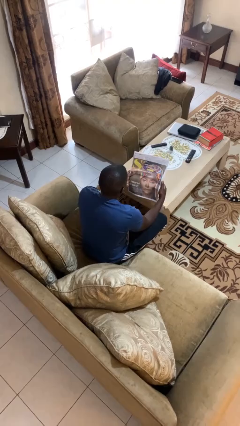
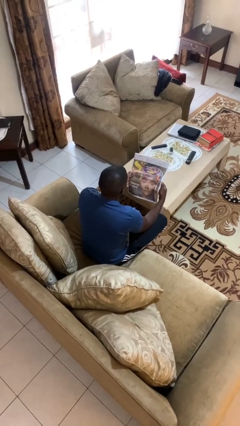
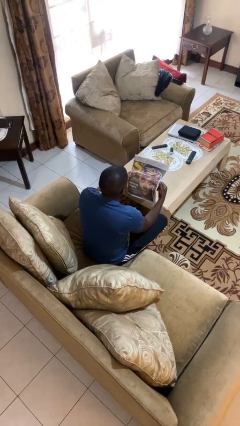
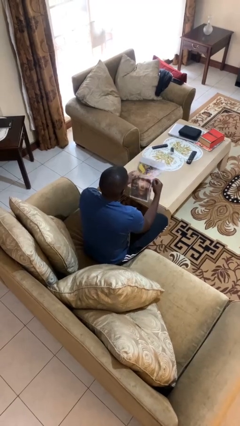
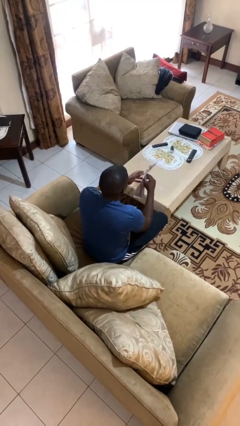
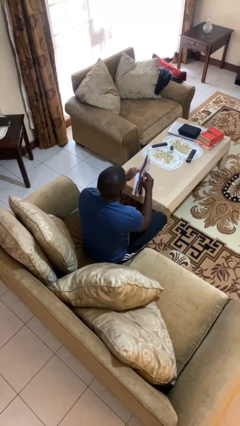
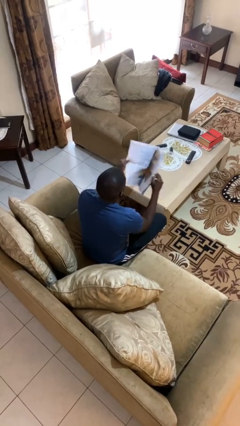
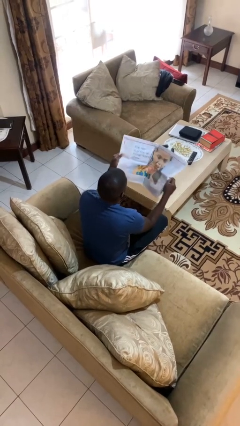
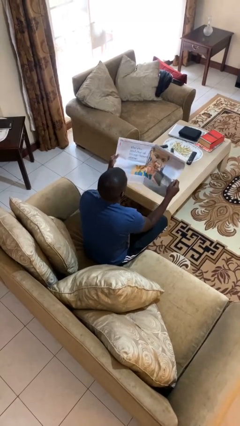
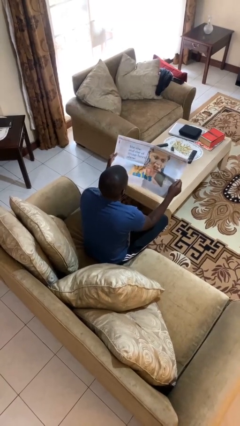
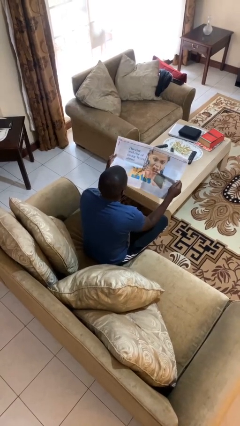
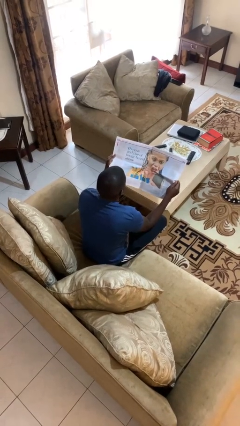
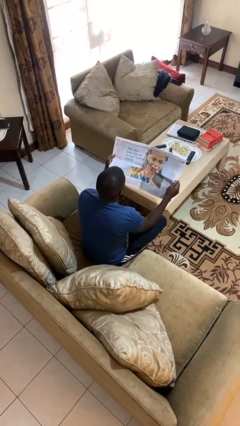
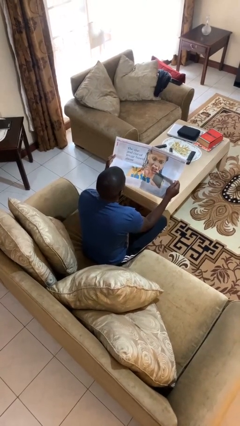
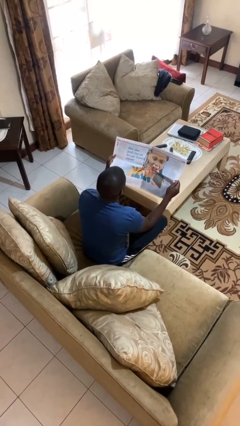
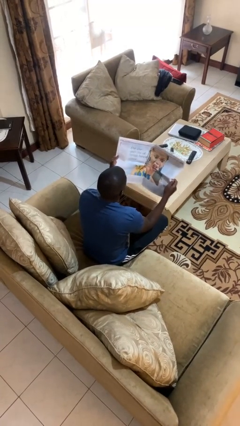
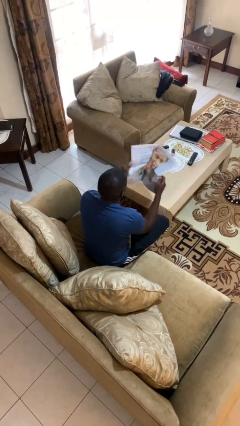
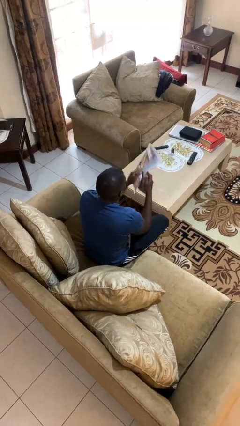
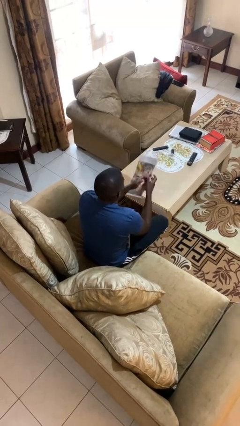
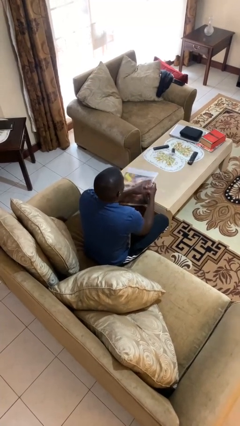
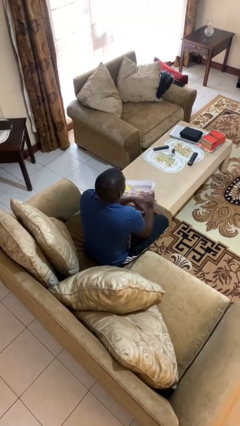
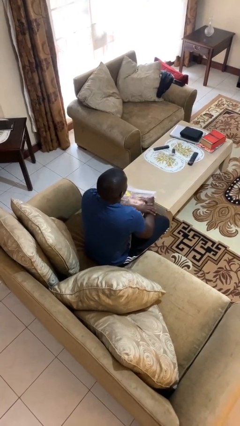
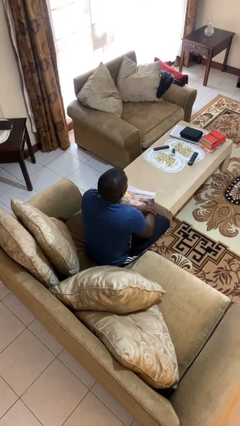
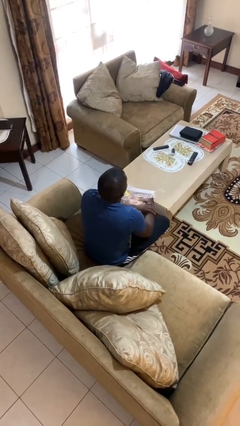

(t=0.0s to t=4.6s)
person reads newspaper

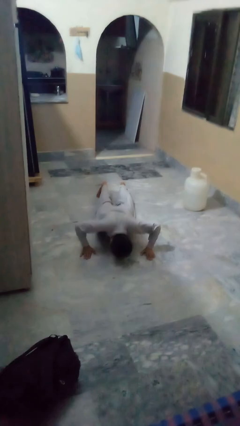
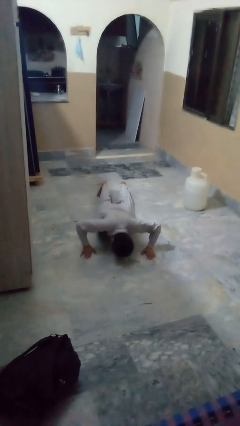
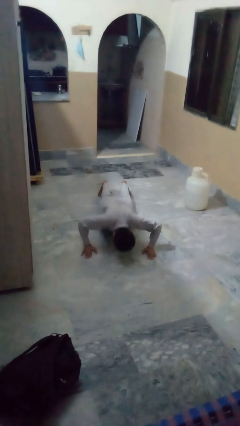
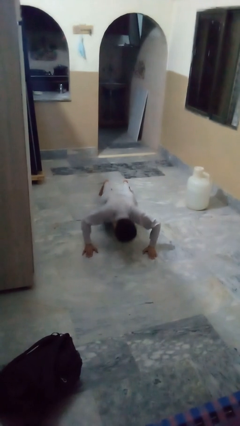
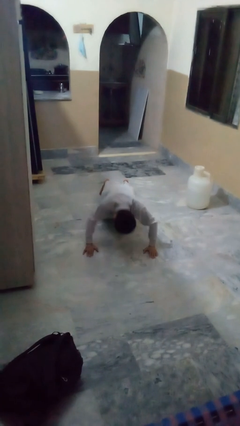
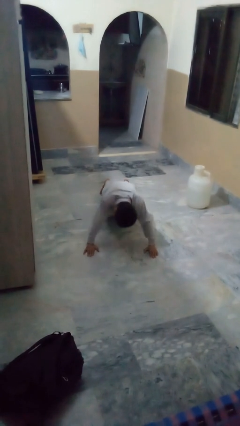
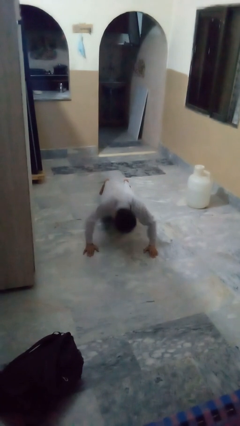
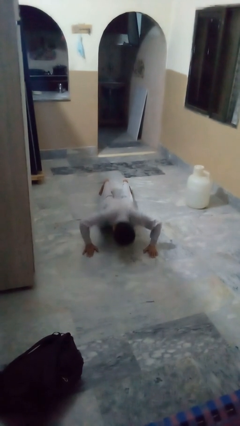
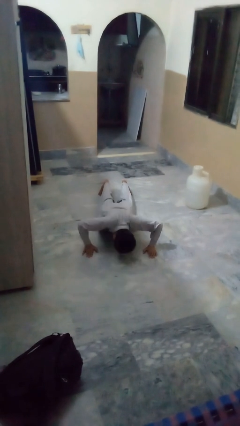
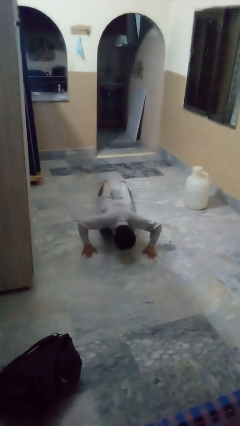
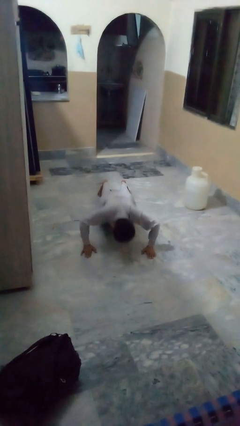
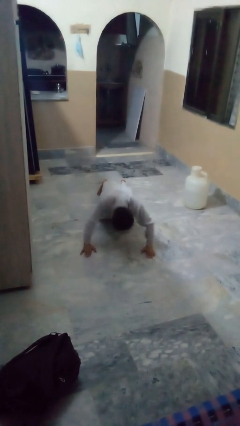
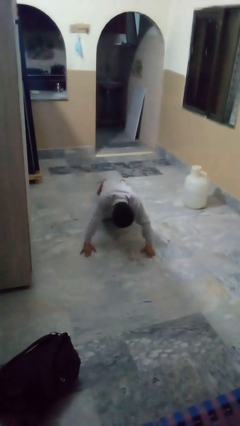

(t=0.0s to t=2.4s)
person exercises with pushup

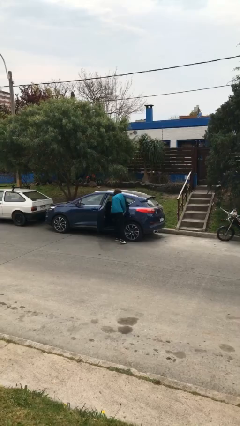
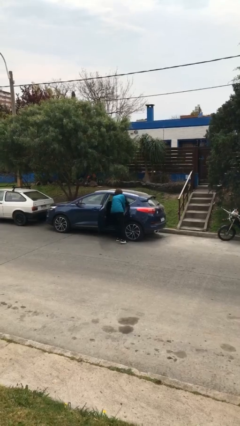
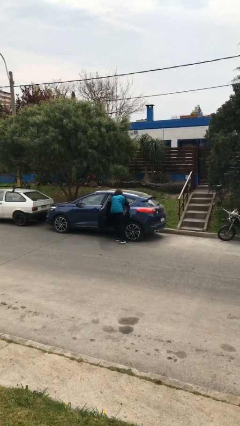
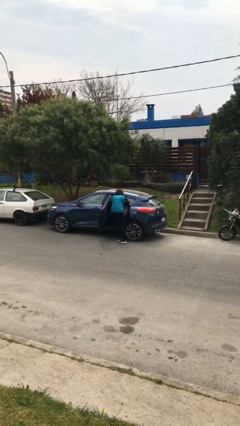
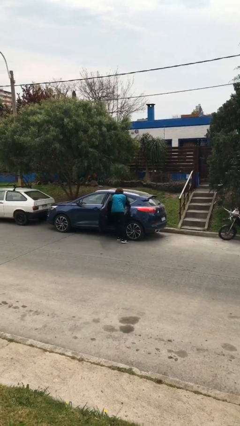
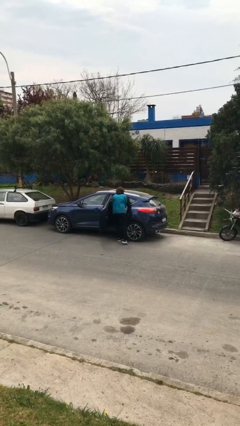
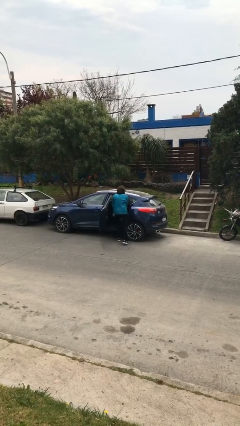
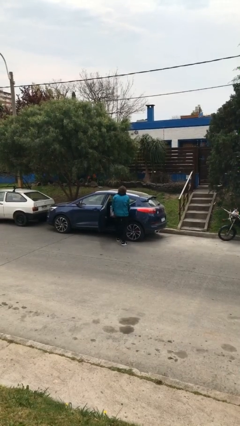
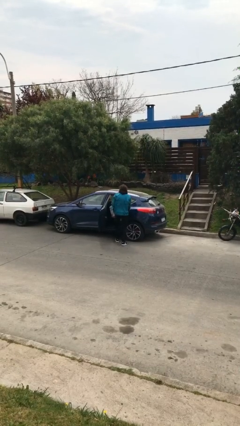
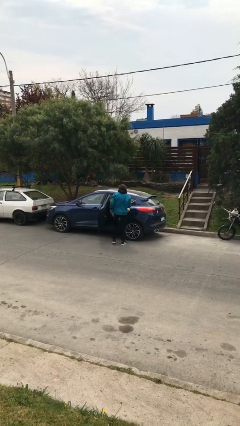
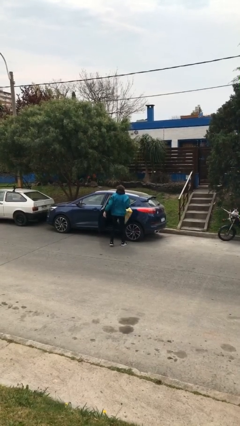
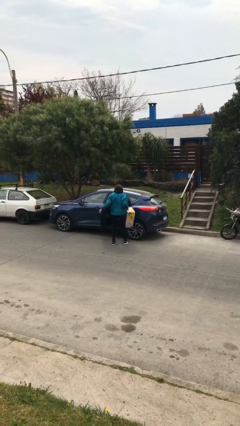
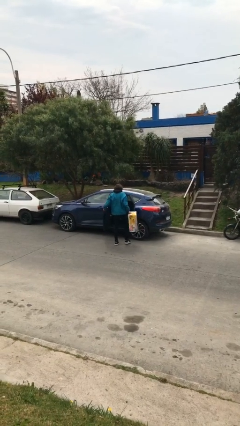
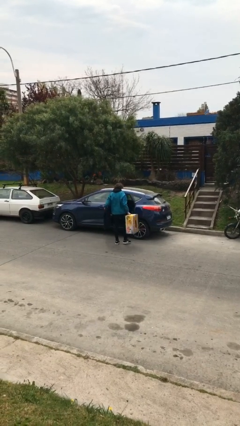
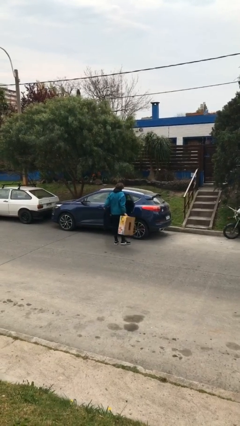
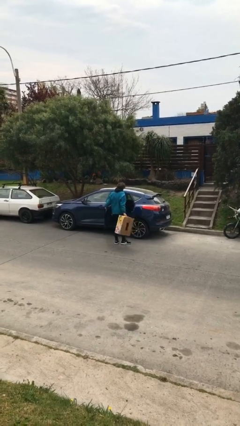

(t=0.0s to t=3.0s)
person unloads car

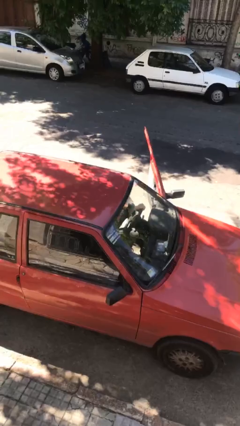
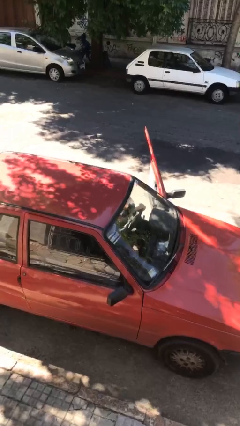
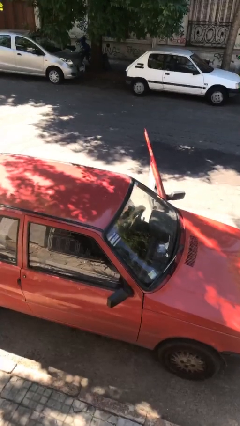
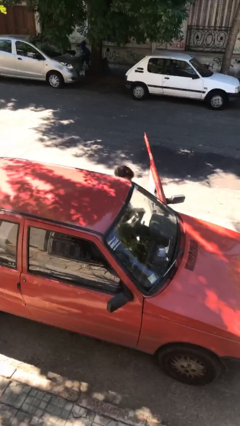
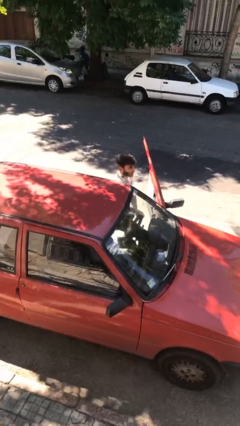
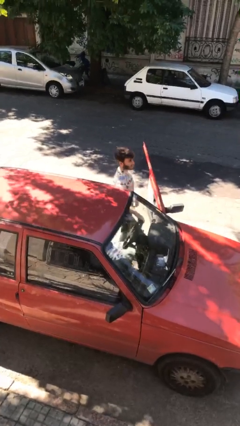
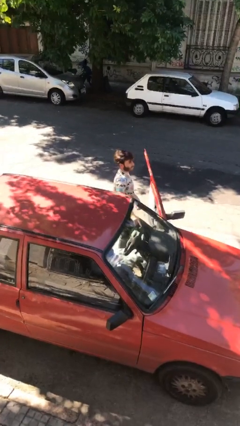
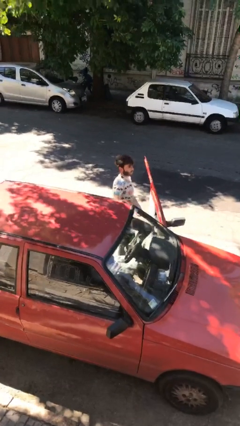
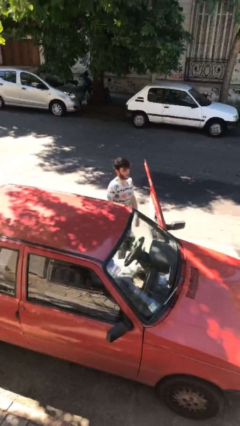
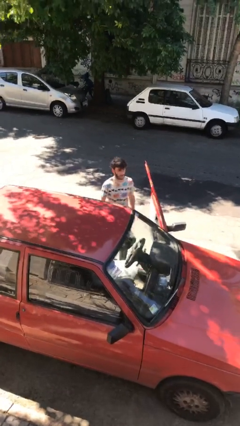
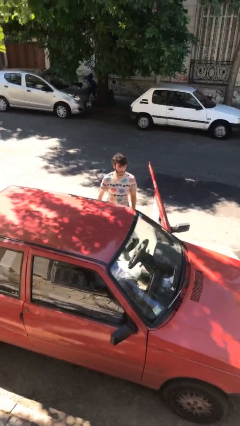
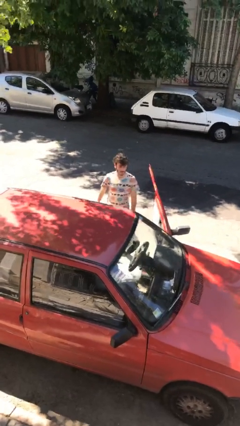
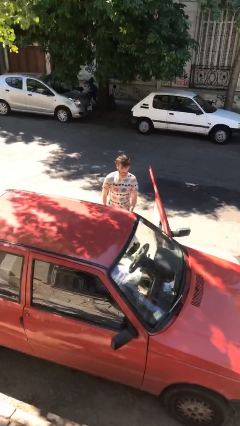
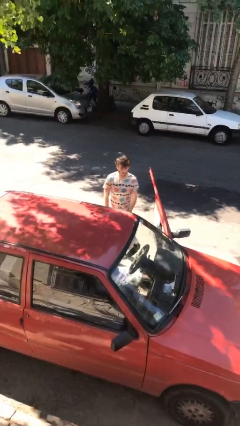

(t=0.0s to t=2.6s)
person exits car

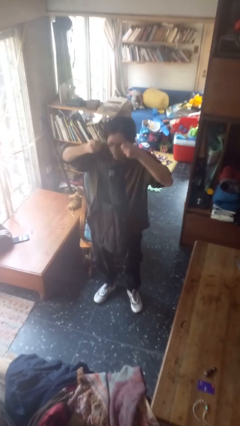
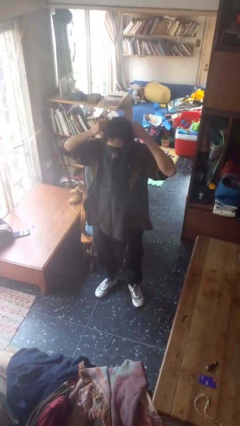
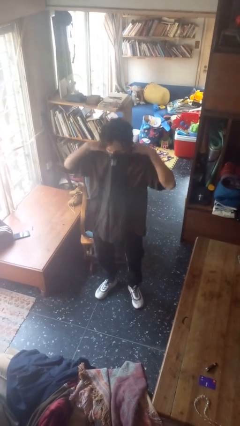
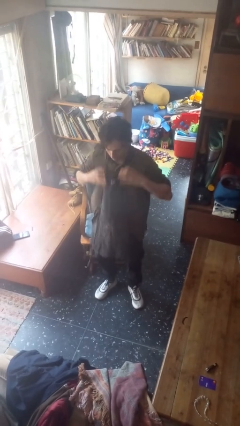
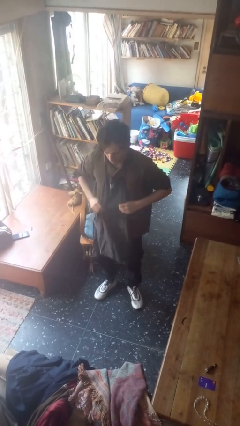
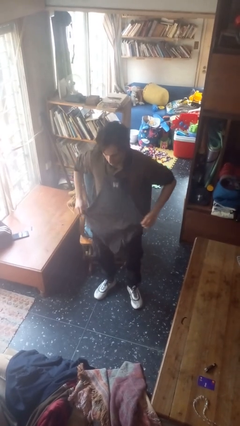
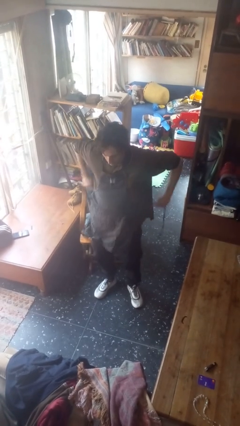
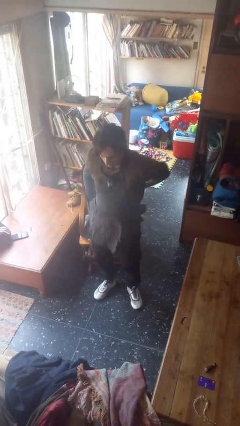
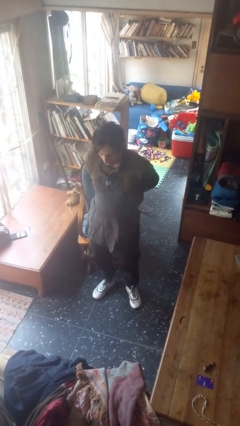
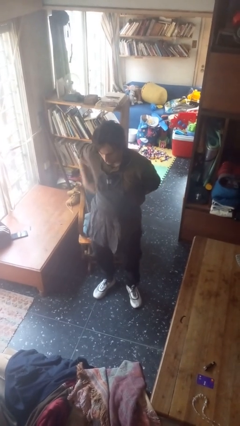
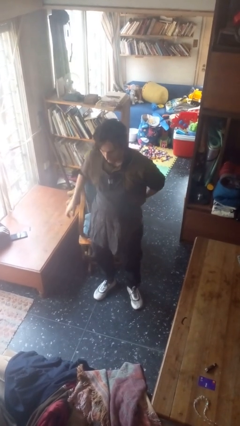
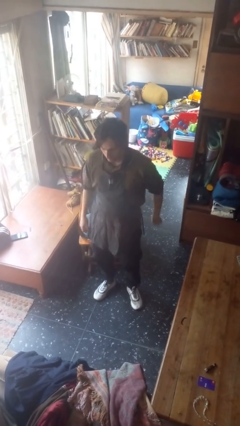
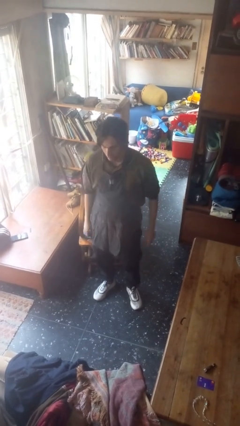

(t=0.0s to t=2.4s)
person puts on apron

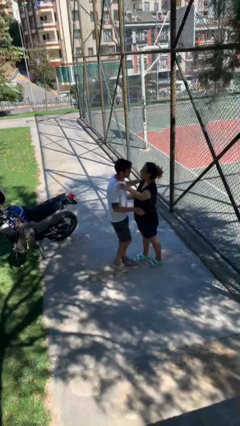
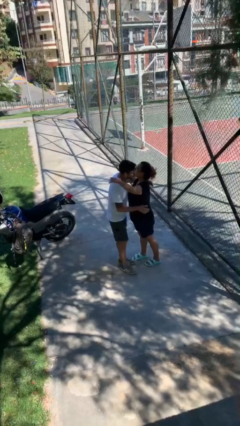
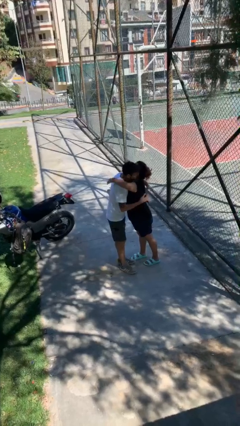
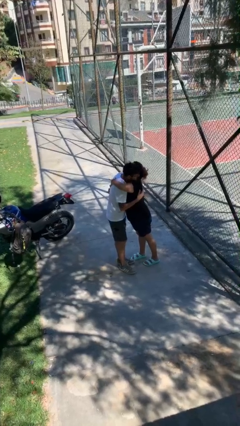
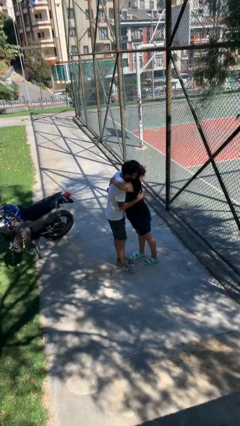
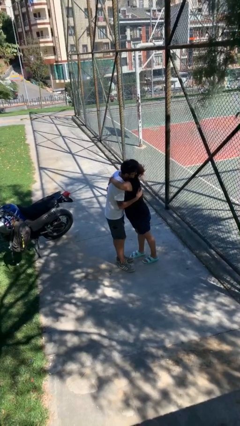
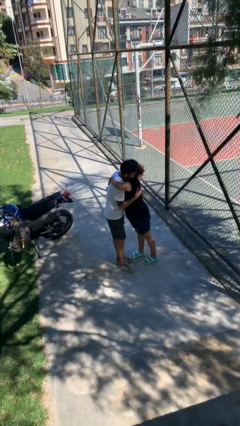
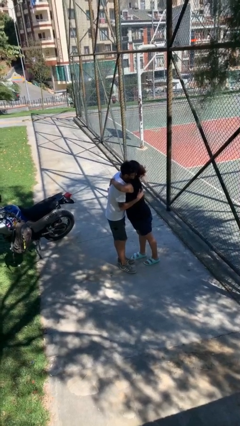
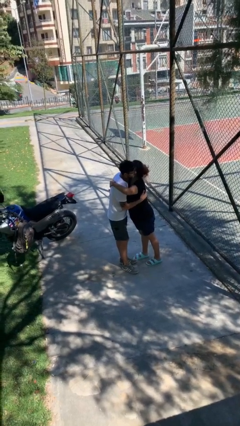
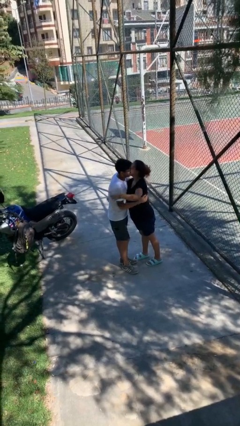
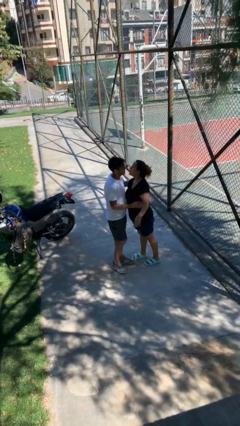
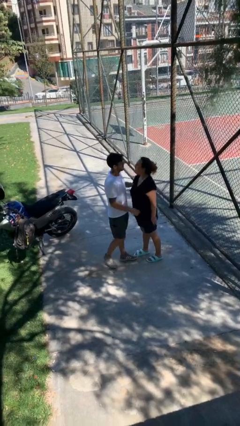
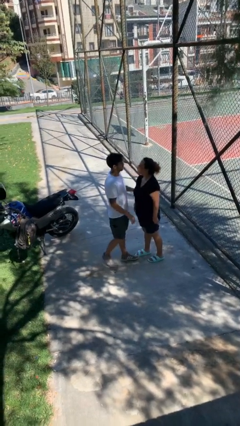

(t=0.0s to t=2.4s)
person embraces person
